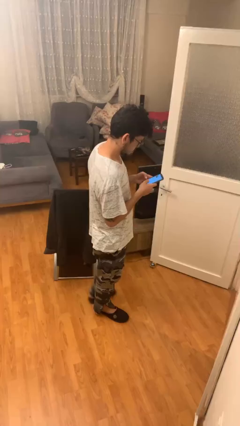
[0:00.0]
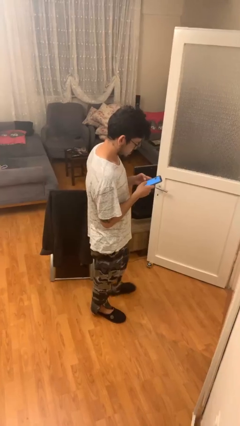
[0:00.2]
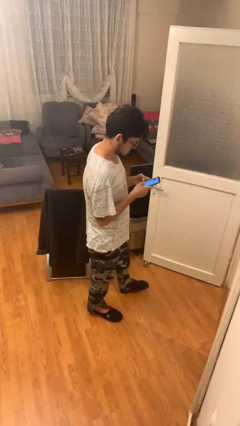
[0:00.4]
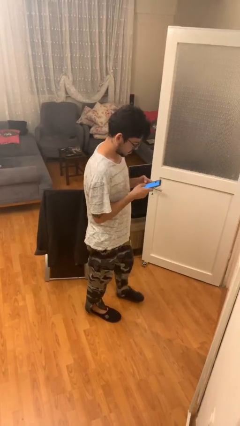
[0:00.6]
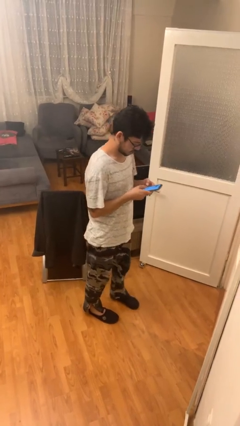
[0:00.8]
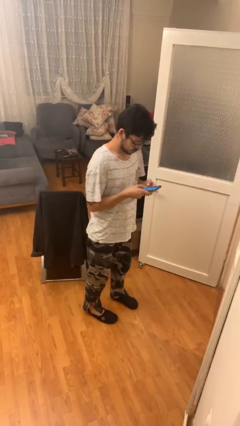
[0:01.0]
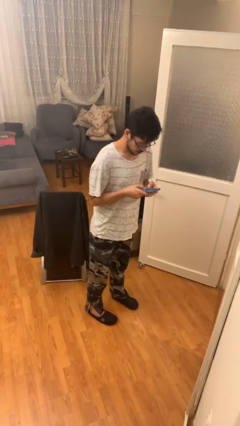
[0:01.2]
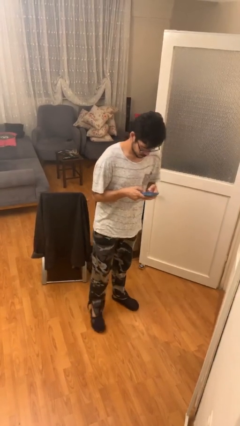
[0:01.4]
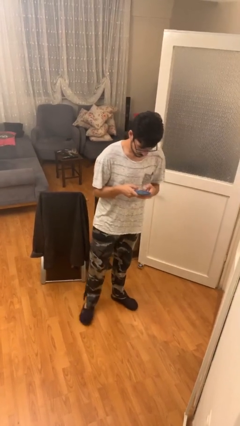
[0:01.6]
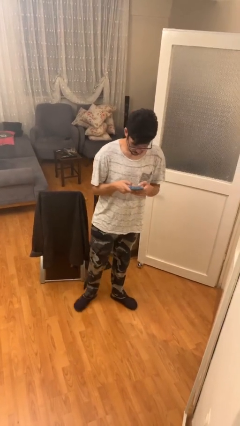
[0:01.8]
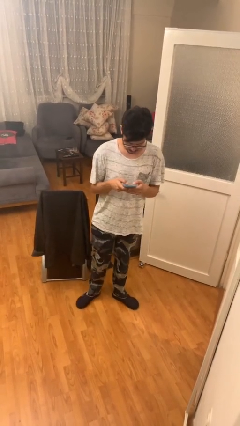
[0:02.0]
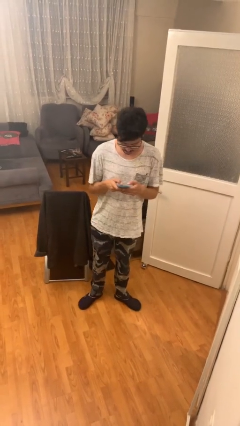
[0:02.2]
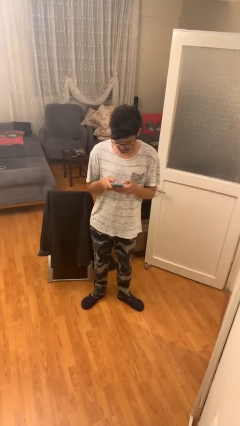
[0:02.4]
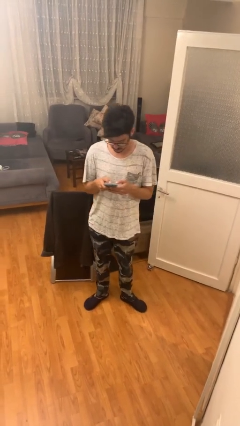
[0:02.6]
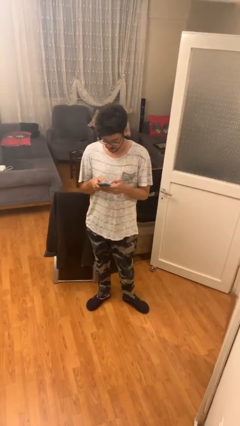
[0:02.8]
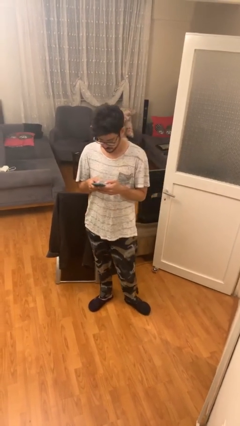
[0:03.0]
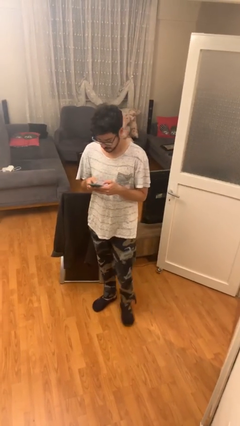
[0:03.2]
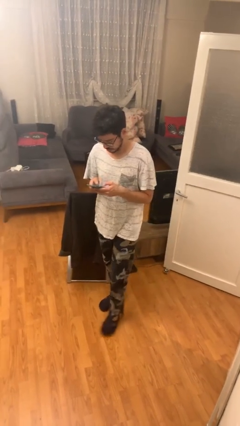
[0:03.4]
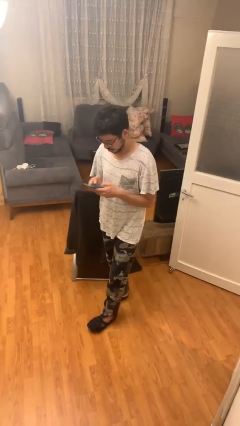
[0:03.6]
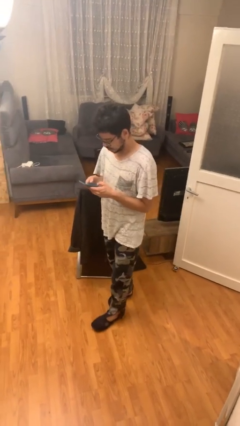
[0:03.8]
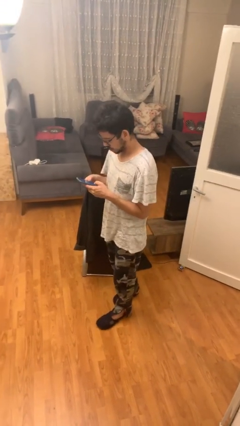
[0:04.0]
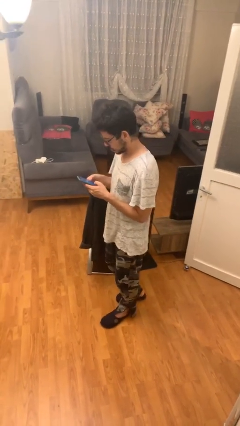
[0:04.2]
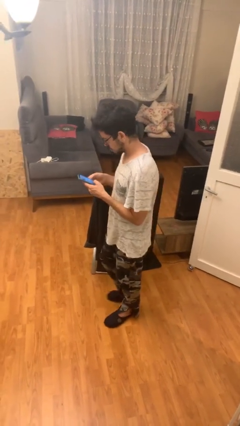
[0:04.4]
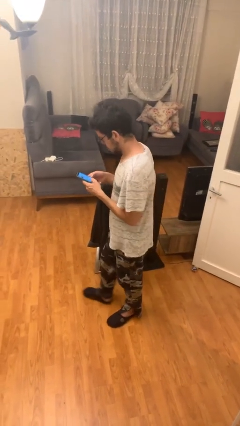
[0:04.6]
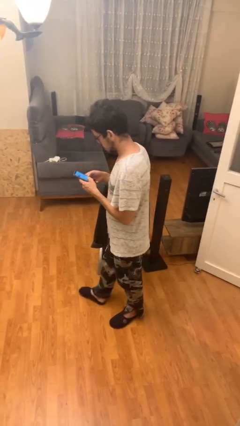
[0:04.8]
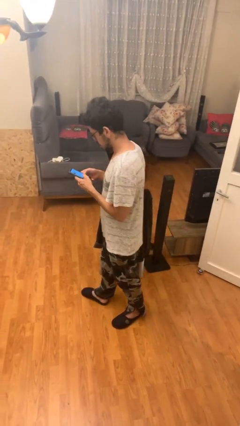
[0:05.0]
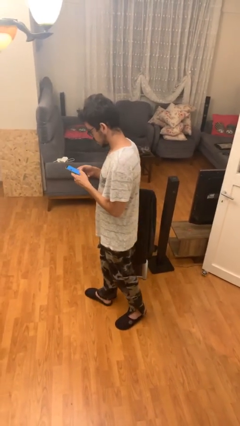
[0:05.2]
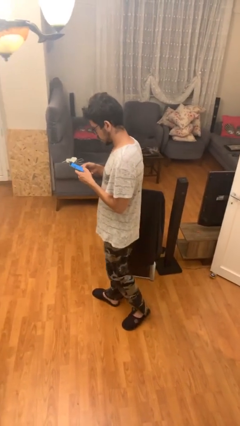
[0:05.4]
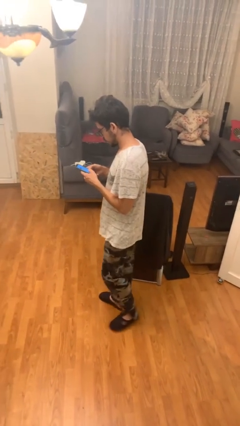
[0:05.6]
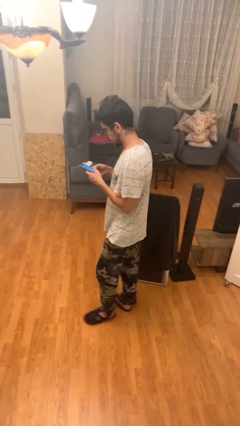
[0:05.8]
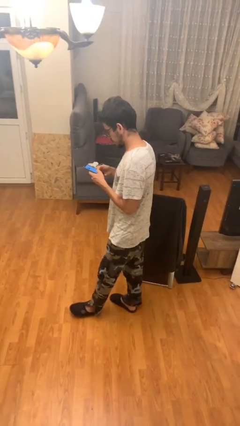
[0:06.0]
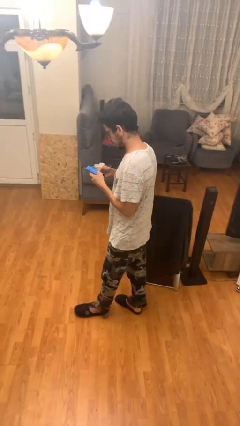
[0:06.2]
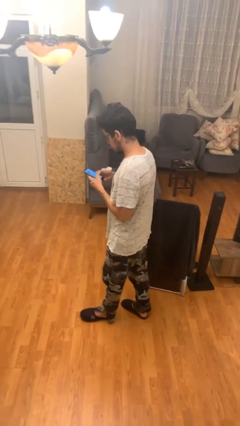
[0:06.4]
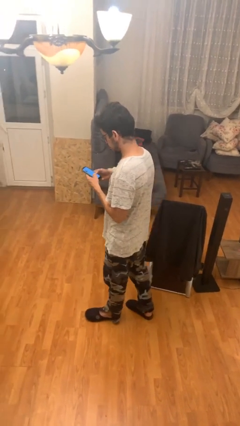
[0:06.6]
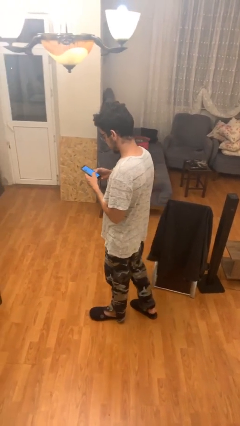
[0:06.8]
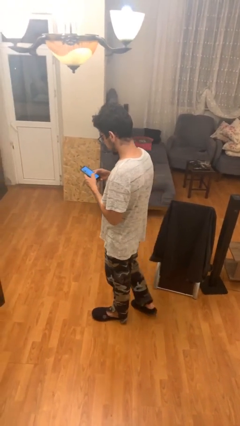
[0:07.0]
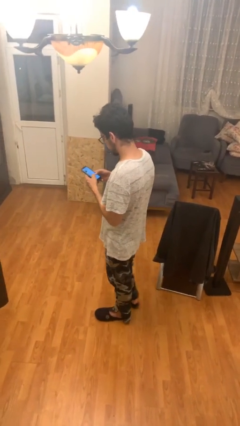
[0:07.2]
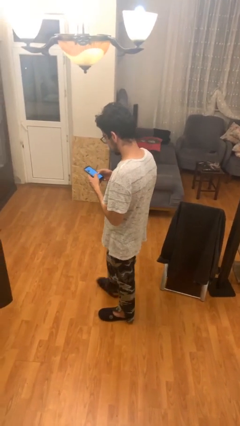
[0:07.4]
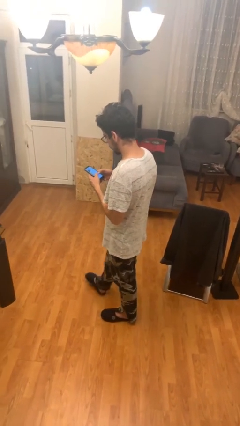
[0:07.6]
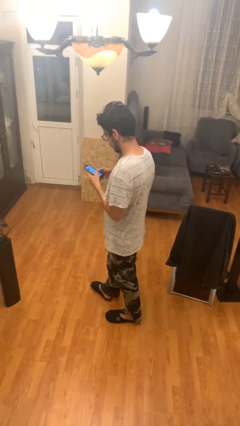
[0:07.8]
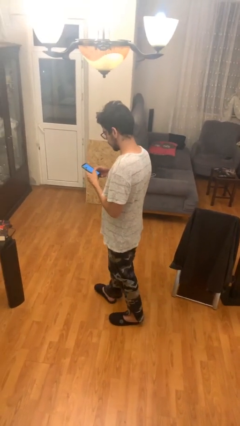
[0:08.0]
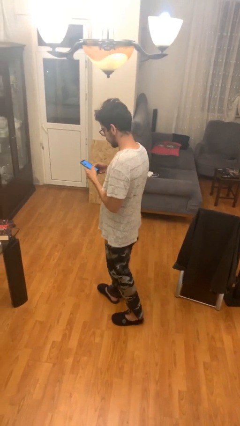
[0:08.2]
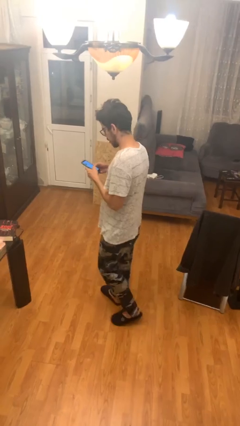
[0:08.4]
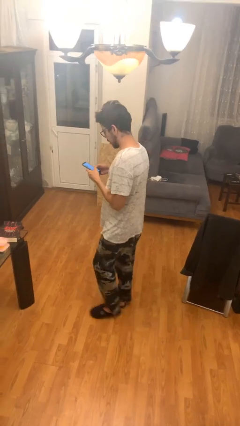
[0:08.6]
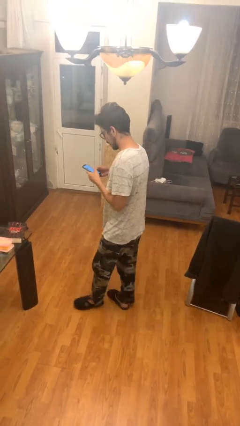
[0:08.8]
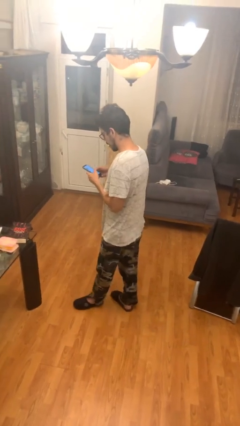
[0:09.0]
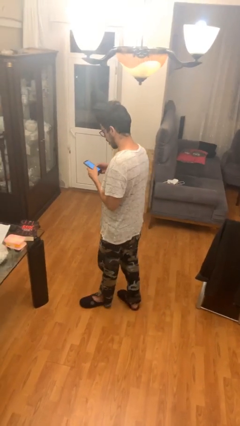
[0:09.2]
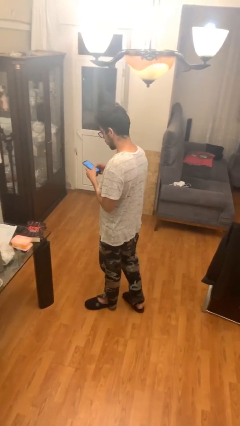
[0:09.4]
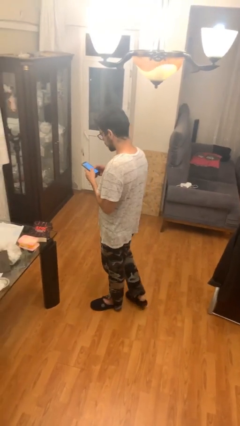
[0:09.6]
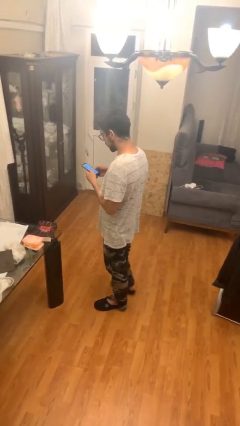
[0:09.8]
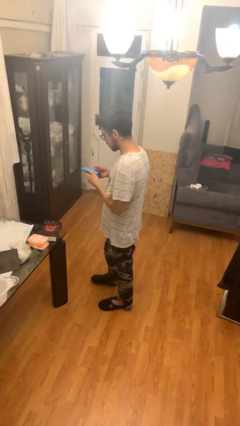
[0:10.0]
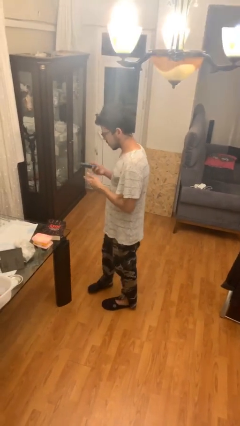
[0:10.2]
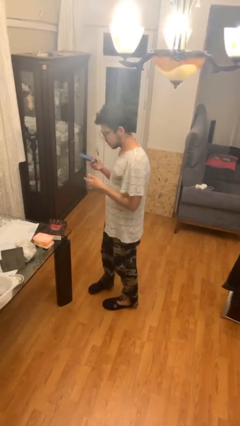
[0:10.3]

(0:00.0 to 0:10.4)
person texts on phone

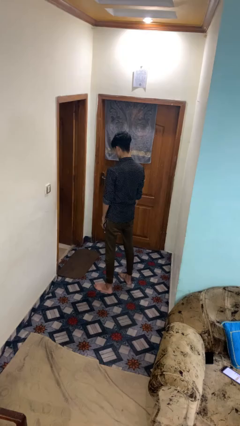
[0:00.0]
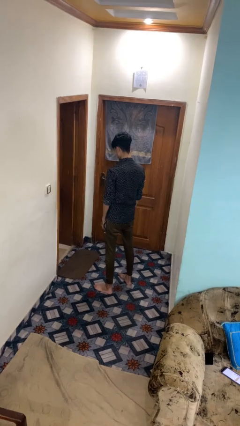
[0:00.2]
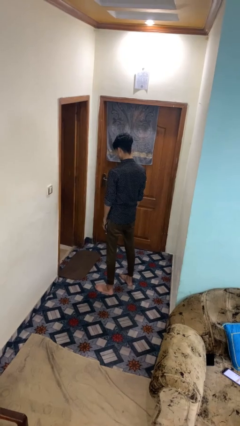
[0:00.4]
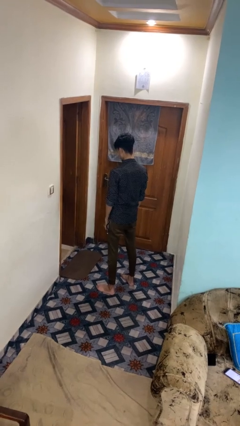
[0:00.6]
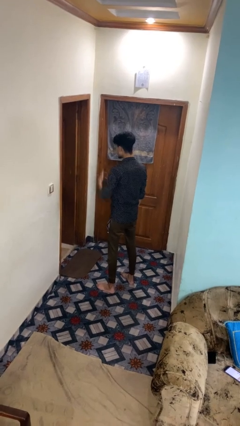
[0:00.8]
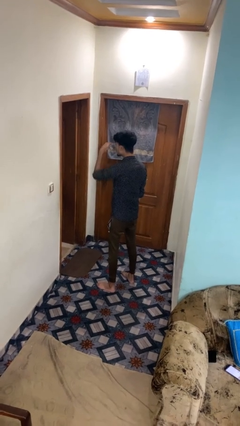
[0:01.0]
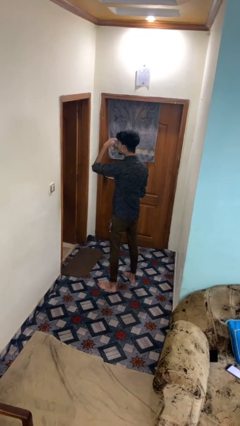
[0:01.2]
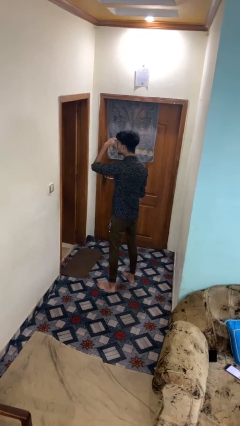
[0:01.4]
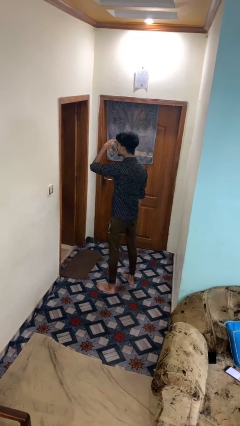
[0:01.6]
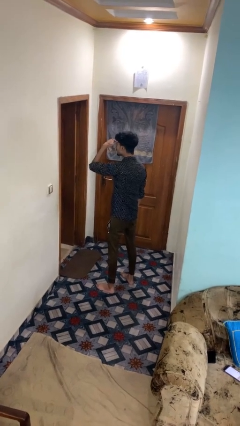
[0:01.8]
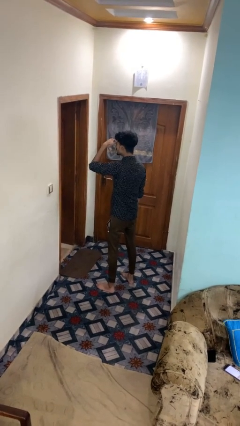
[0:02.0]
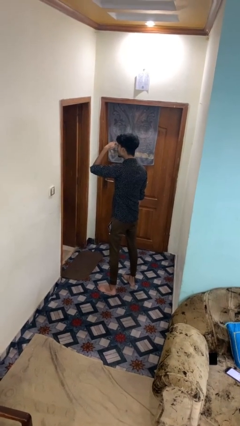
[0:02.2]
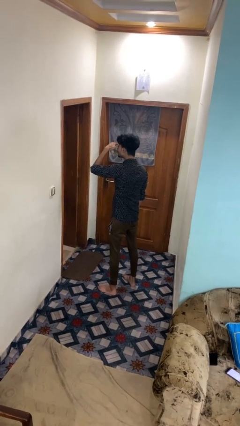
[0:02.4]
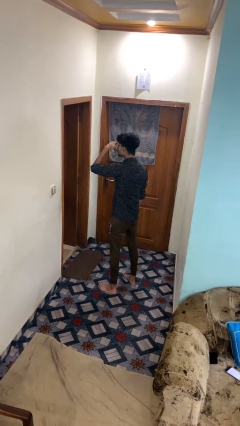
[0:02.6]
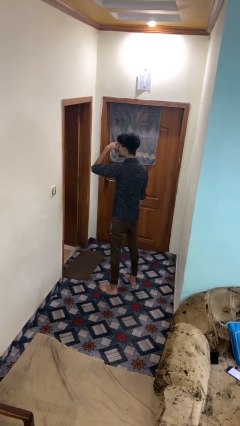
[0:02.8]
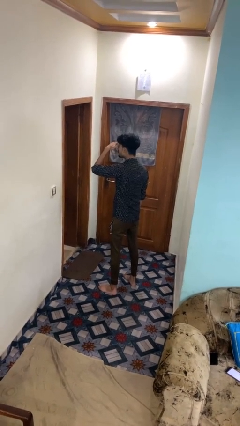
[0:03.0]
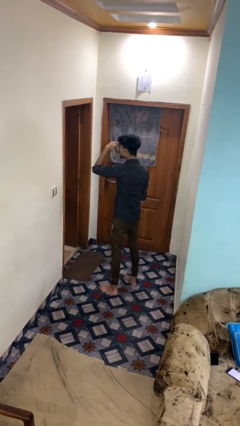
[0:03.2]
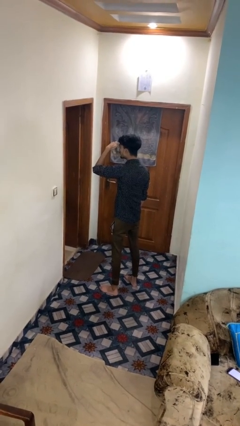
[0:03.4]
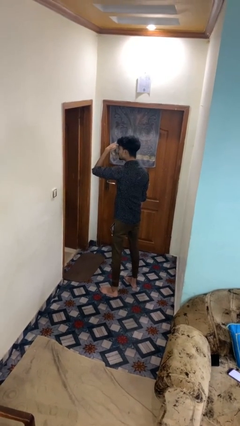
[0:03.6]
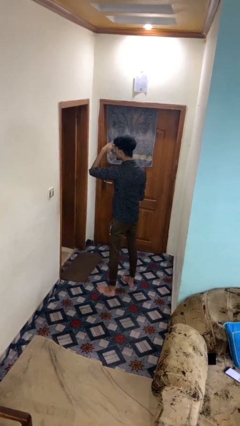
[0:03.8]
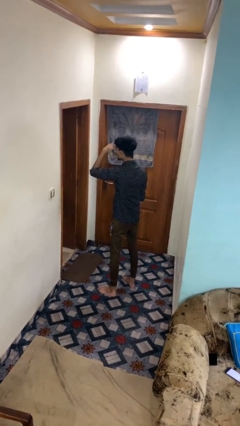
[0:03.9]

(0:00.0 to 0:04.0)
person shades eyes

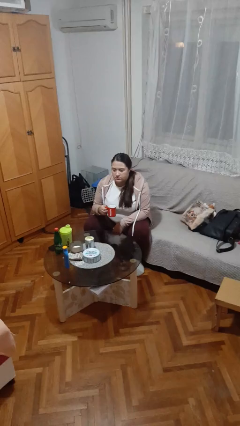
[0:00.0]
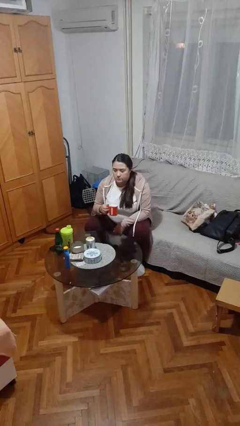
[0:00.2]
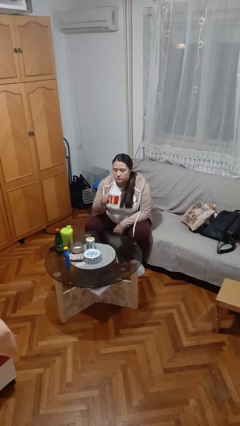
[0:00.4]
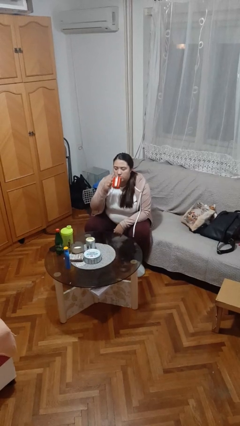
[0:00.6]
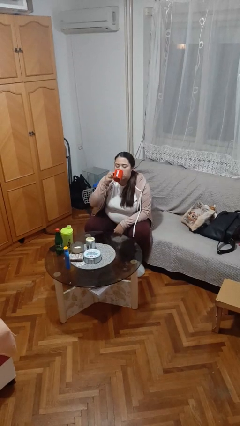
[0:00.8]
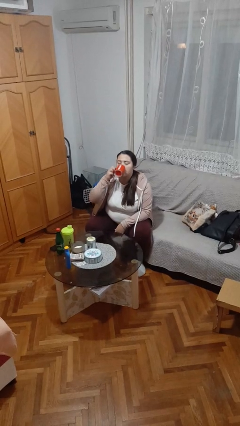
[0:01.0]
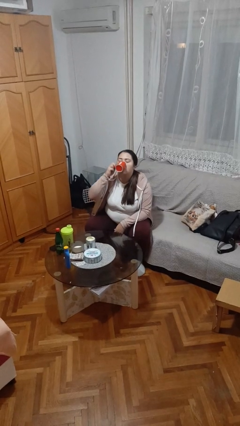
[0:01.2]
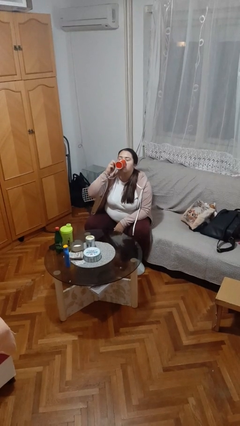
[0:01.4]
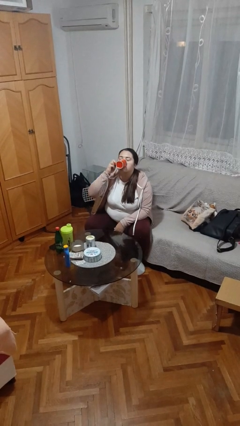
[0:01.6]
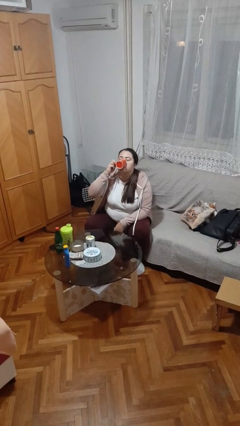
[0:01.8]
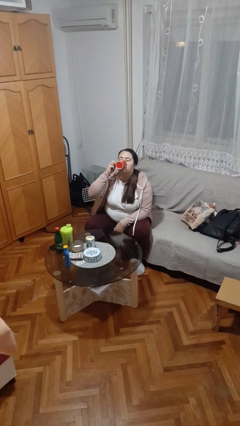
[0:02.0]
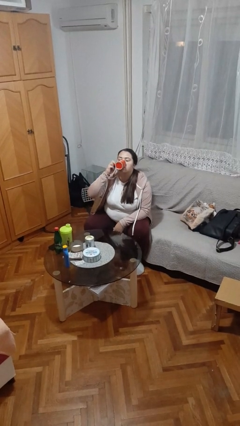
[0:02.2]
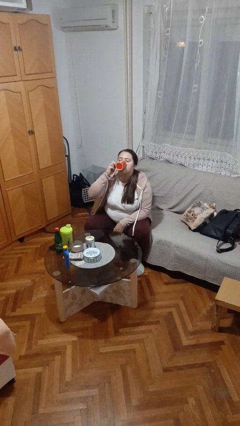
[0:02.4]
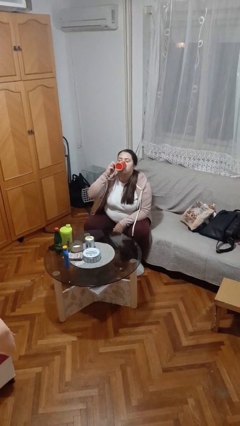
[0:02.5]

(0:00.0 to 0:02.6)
person drinks from mug
